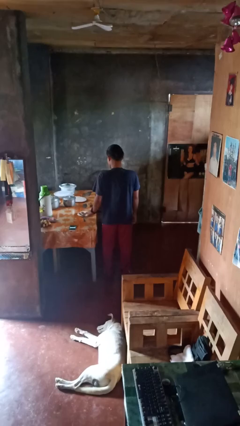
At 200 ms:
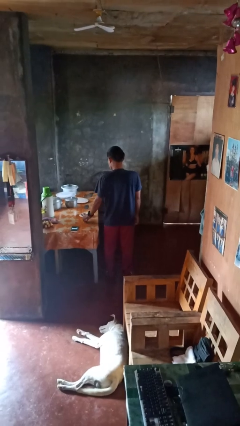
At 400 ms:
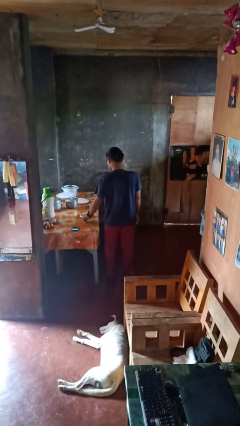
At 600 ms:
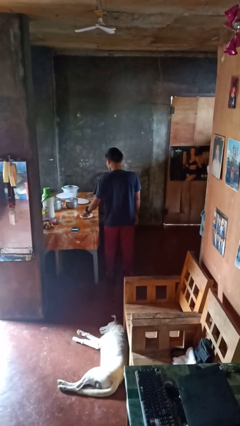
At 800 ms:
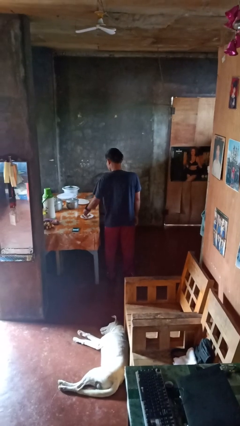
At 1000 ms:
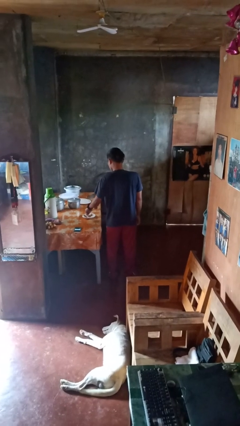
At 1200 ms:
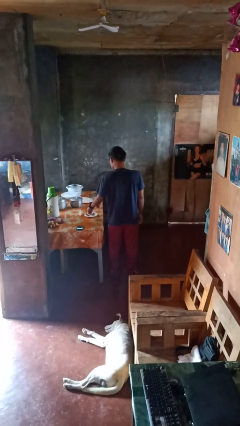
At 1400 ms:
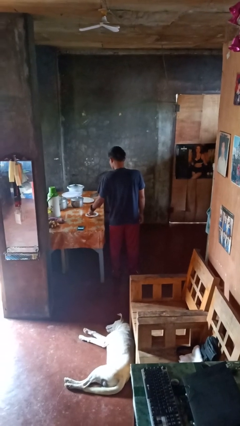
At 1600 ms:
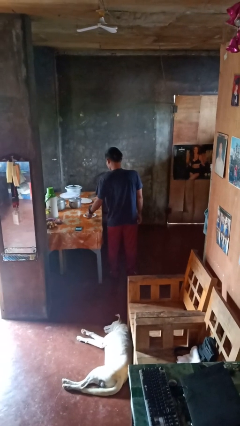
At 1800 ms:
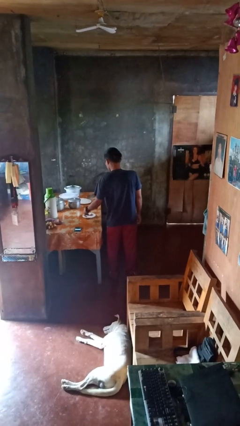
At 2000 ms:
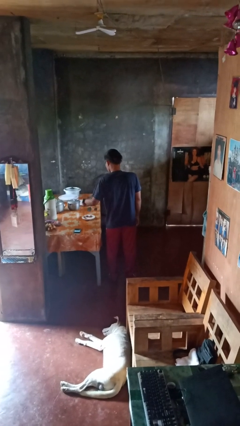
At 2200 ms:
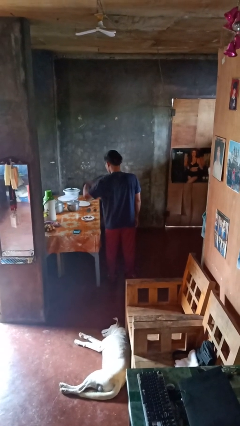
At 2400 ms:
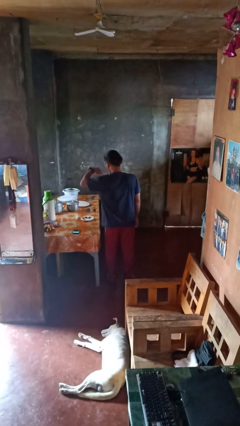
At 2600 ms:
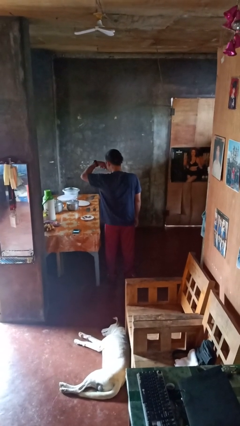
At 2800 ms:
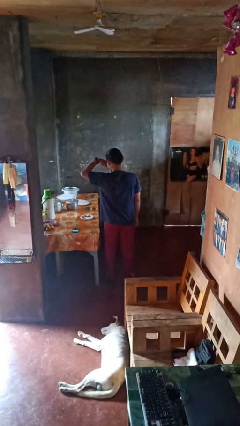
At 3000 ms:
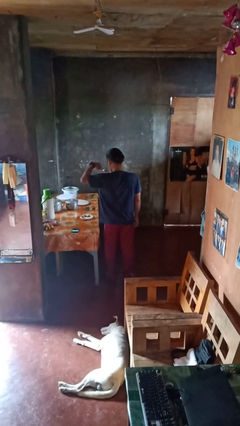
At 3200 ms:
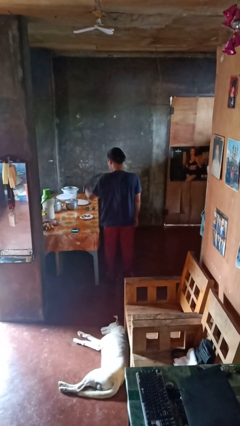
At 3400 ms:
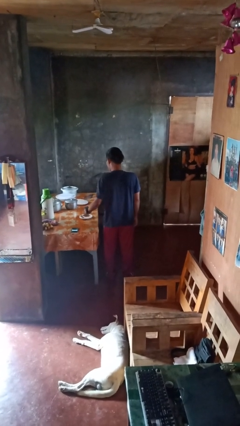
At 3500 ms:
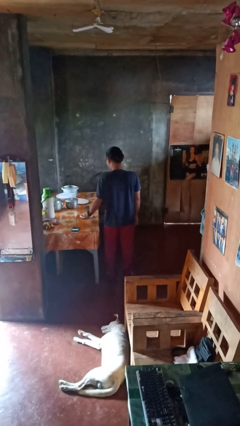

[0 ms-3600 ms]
person eats with utensil

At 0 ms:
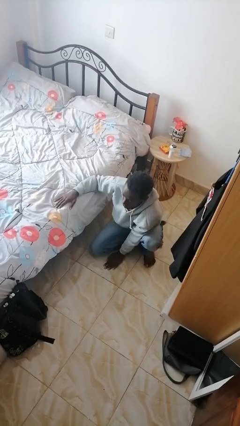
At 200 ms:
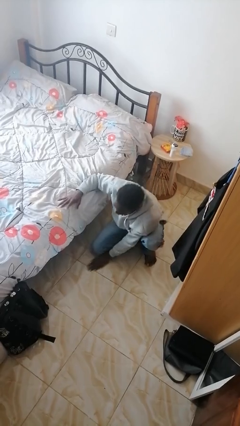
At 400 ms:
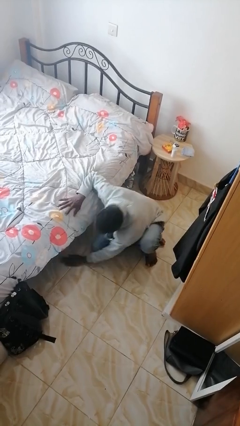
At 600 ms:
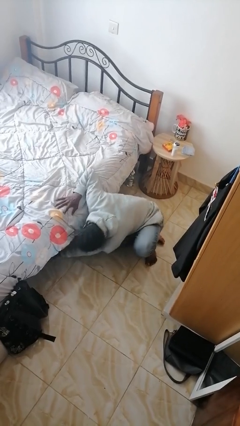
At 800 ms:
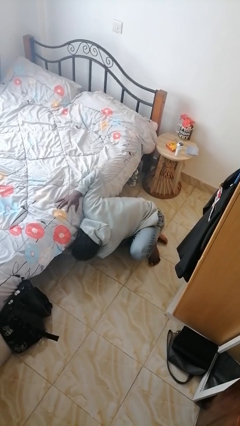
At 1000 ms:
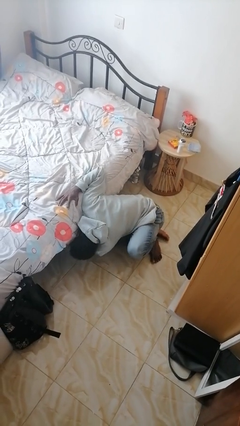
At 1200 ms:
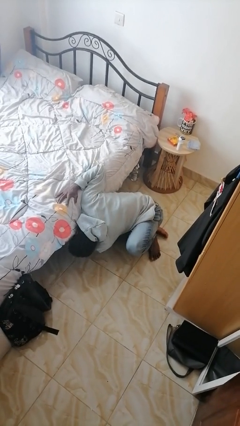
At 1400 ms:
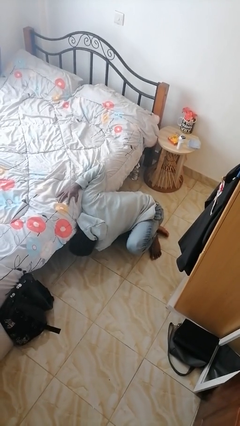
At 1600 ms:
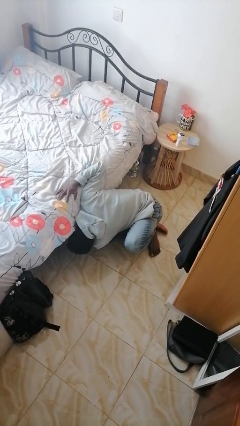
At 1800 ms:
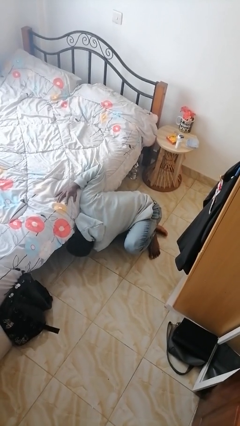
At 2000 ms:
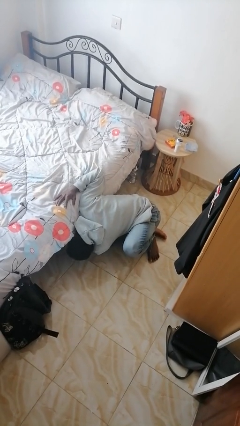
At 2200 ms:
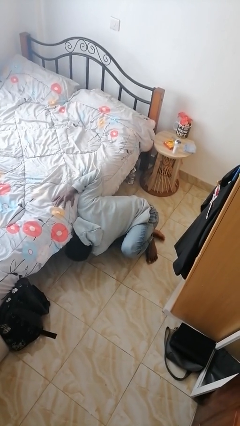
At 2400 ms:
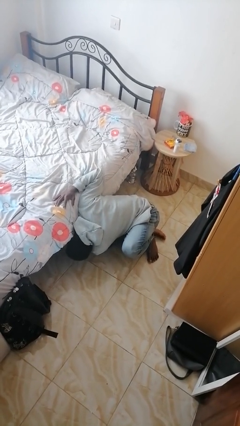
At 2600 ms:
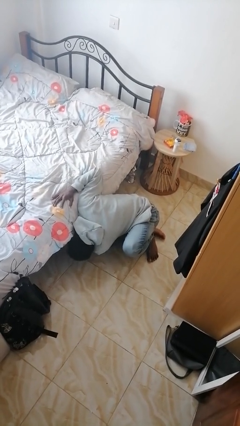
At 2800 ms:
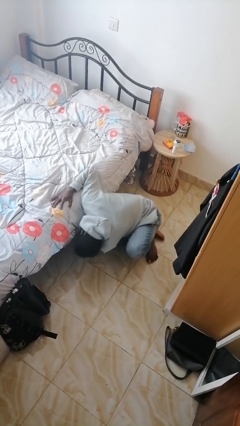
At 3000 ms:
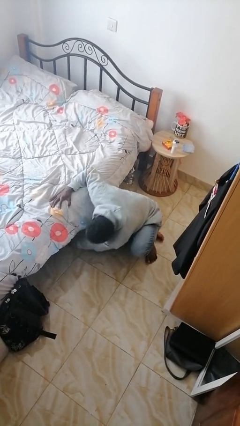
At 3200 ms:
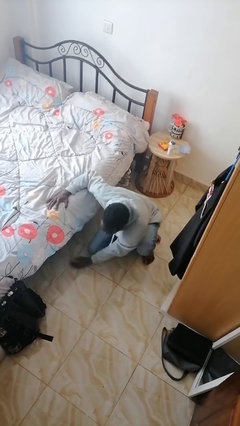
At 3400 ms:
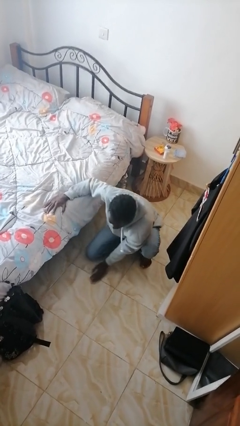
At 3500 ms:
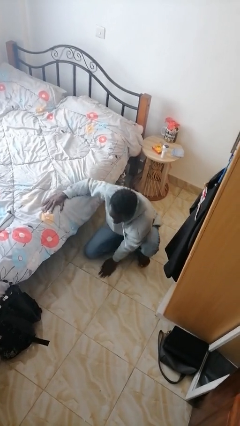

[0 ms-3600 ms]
person searches under bed

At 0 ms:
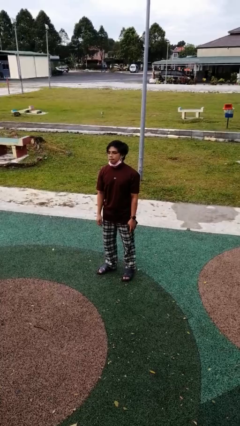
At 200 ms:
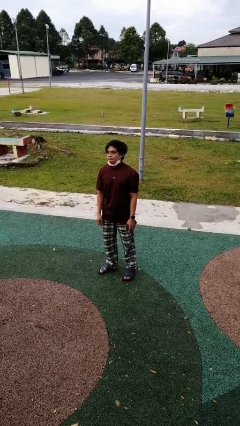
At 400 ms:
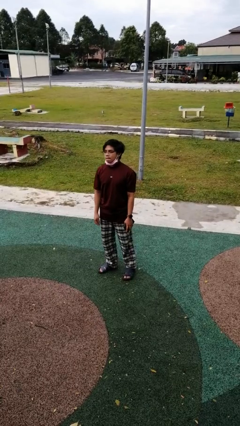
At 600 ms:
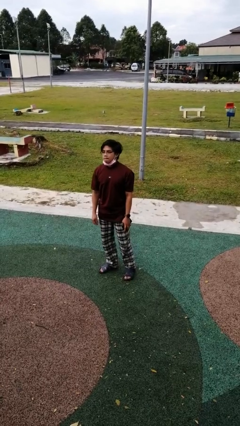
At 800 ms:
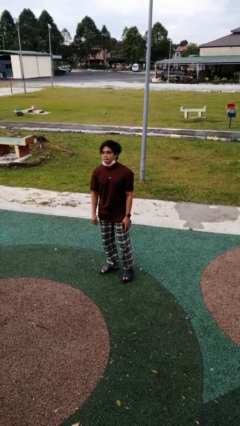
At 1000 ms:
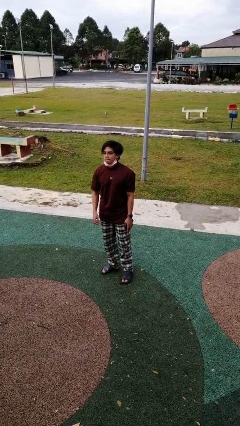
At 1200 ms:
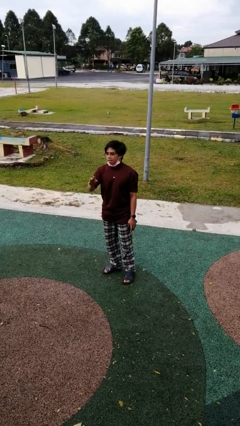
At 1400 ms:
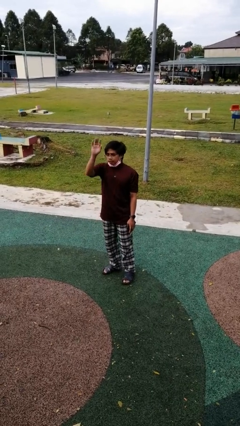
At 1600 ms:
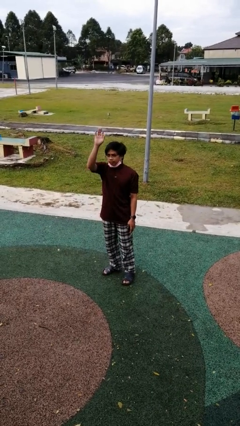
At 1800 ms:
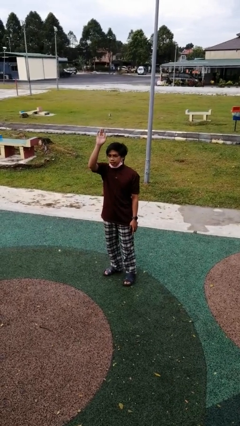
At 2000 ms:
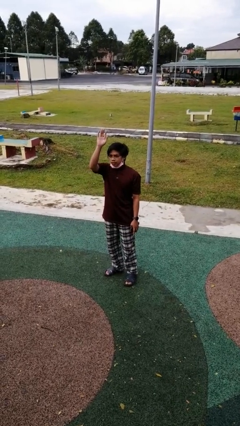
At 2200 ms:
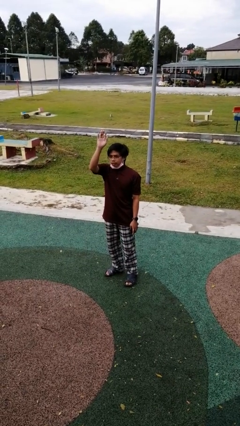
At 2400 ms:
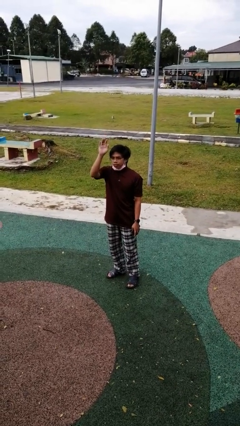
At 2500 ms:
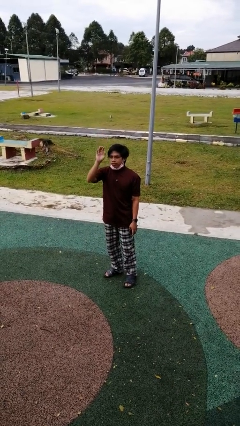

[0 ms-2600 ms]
person gestures raise hand

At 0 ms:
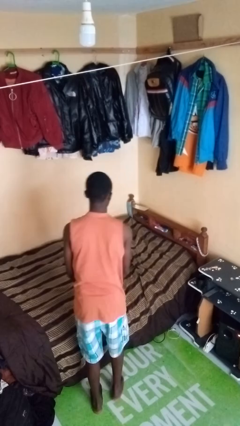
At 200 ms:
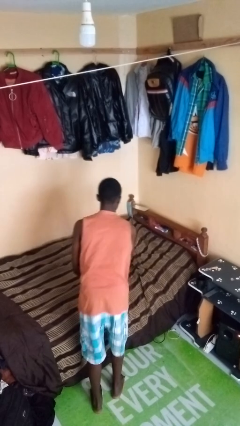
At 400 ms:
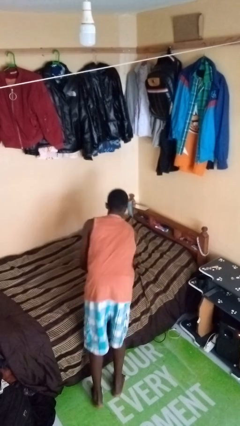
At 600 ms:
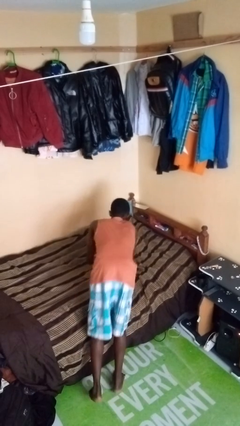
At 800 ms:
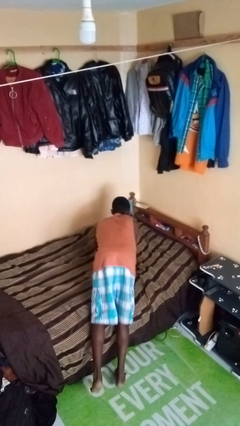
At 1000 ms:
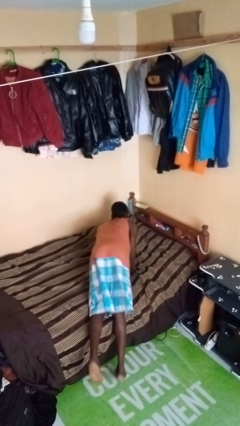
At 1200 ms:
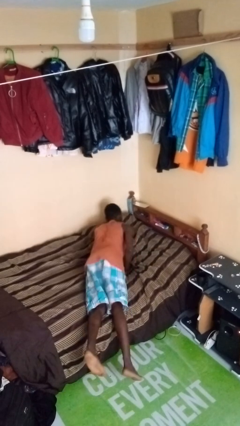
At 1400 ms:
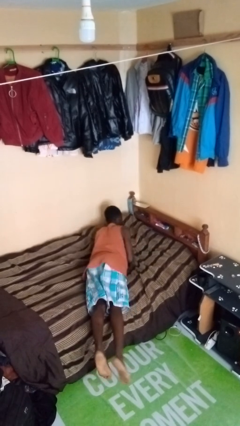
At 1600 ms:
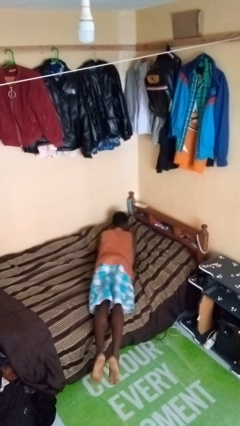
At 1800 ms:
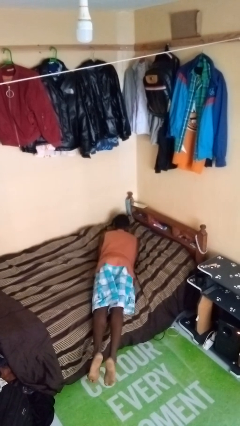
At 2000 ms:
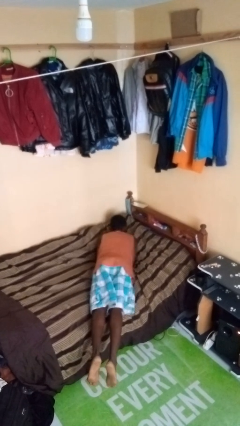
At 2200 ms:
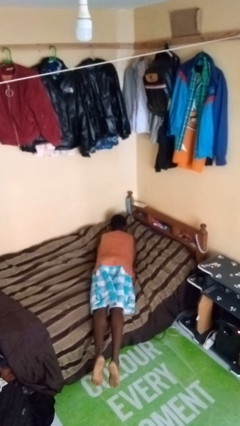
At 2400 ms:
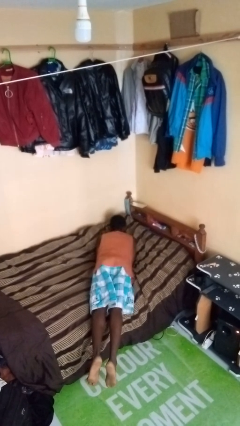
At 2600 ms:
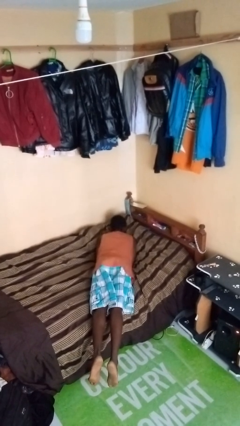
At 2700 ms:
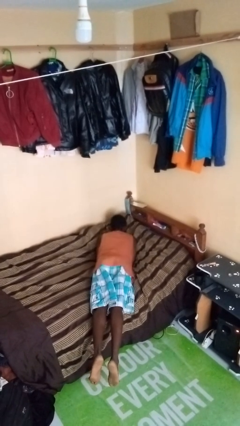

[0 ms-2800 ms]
person lies down on bed

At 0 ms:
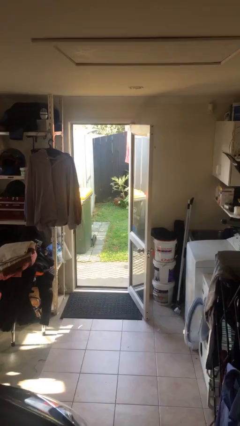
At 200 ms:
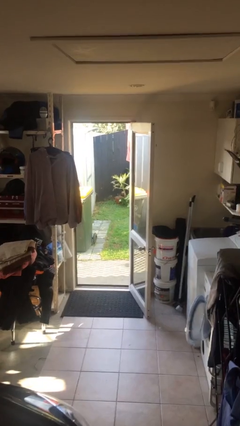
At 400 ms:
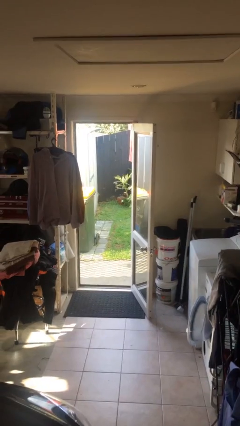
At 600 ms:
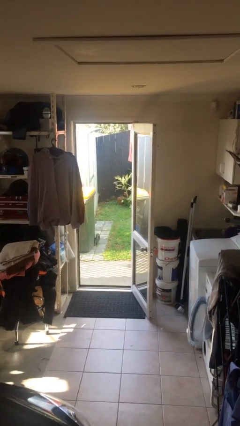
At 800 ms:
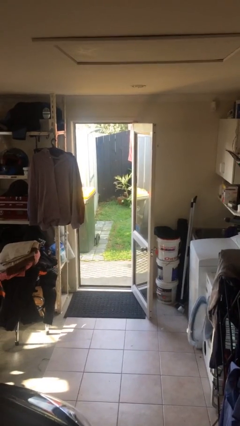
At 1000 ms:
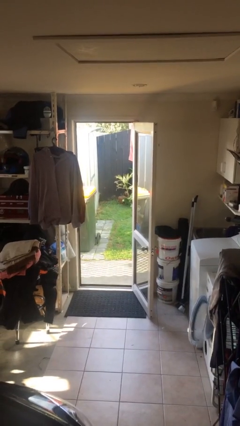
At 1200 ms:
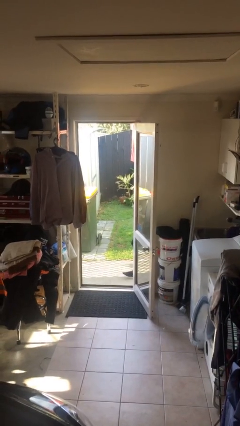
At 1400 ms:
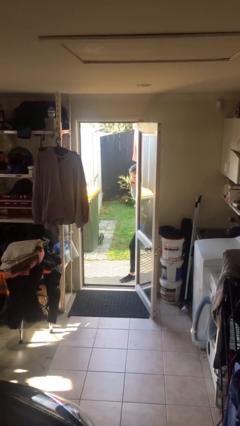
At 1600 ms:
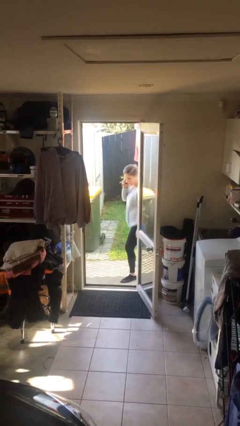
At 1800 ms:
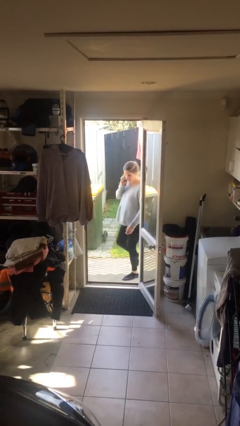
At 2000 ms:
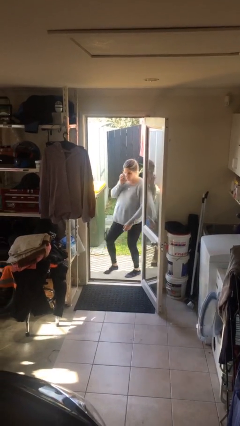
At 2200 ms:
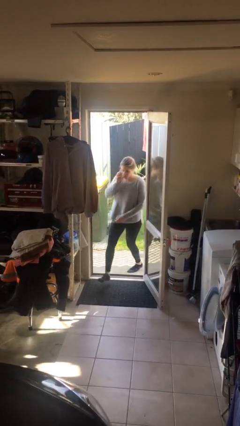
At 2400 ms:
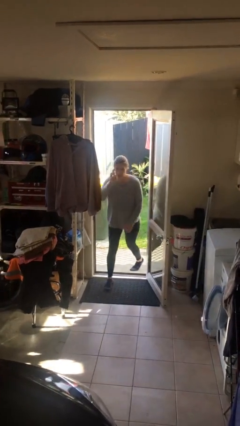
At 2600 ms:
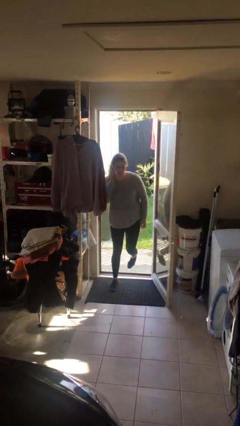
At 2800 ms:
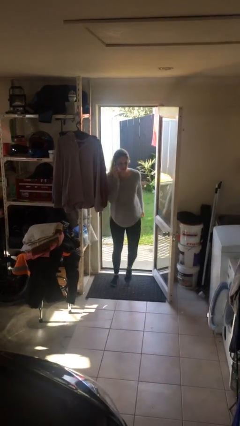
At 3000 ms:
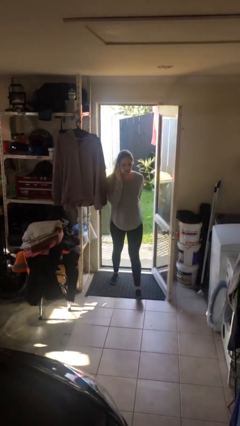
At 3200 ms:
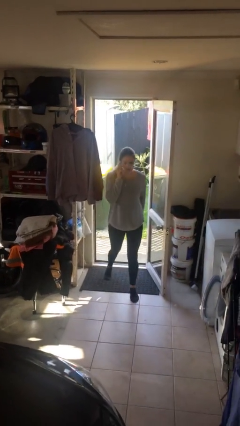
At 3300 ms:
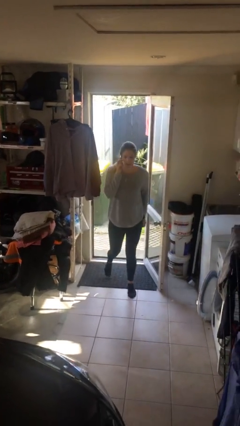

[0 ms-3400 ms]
person enters scene through structure

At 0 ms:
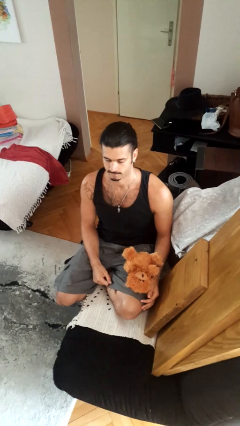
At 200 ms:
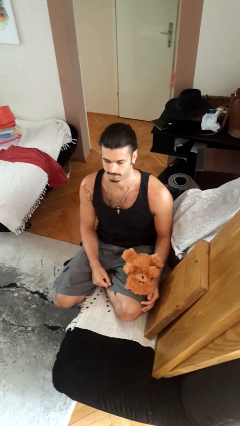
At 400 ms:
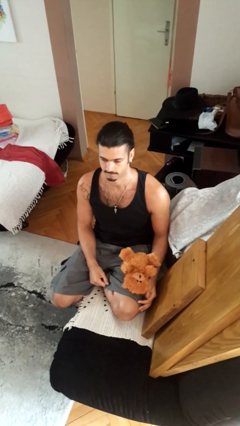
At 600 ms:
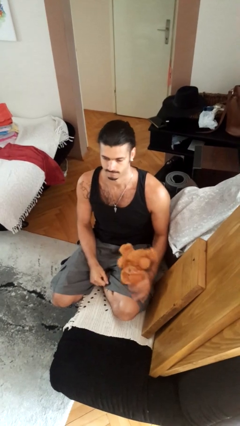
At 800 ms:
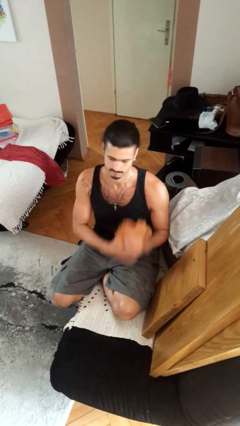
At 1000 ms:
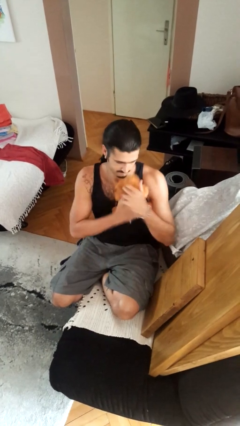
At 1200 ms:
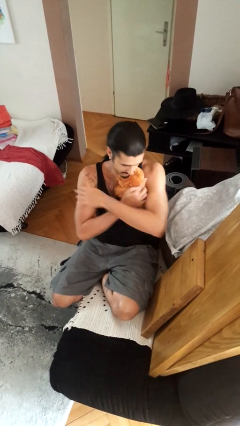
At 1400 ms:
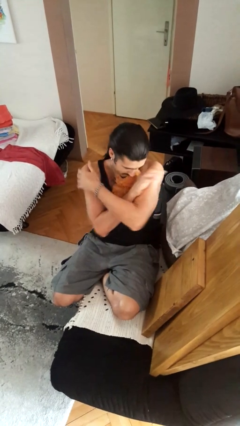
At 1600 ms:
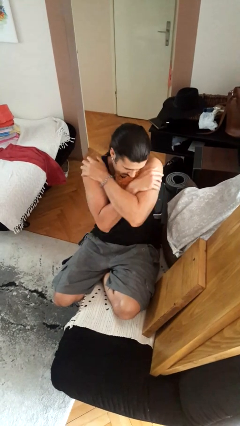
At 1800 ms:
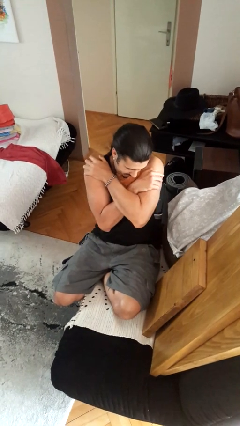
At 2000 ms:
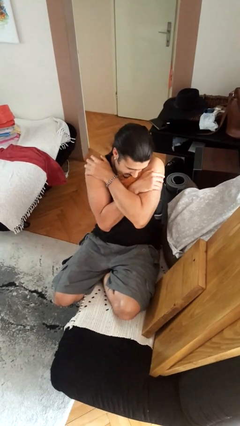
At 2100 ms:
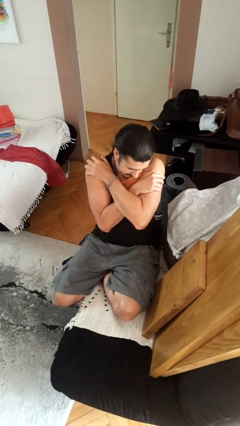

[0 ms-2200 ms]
person hugs stuffed animal
